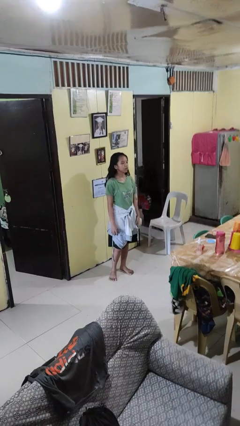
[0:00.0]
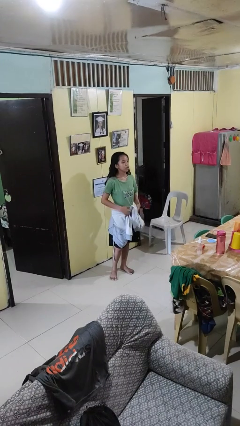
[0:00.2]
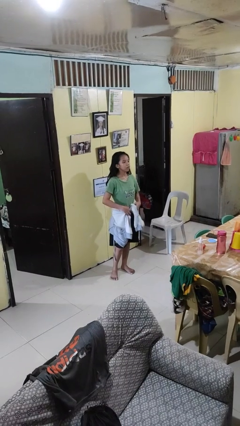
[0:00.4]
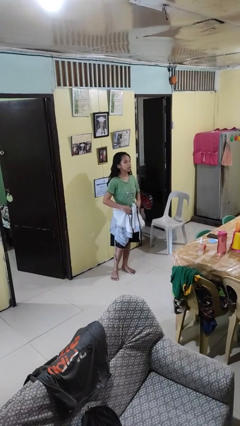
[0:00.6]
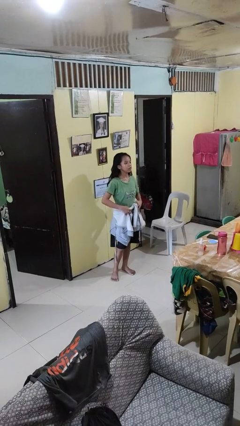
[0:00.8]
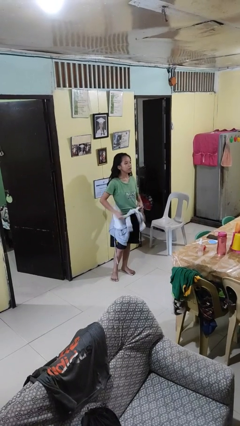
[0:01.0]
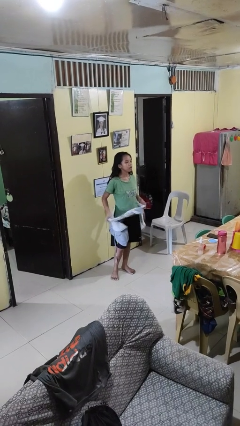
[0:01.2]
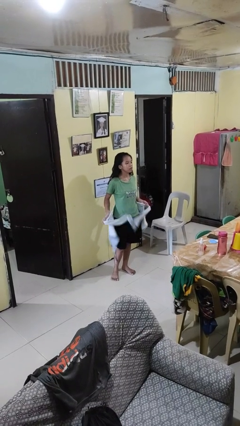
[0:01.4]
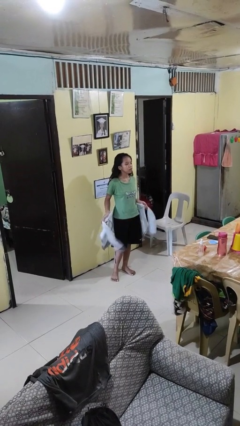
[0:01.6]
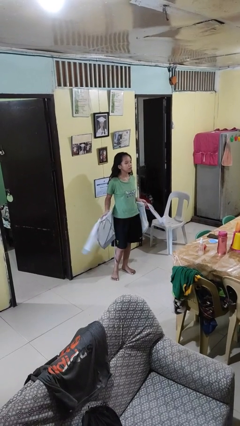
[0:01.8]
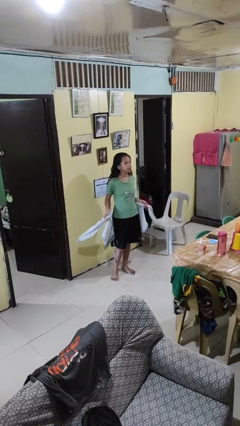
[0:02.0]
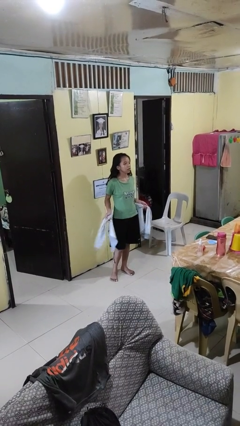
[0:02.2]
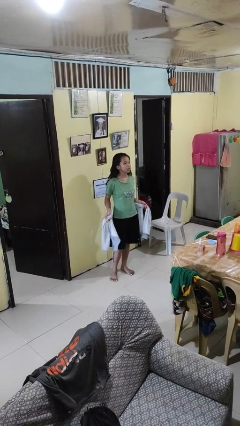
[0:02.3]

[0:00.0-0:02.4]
person unties jacket around waist

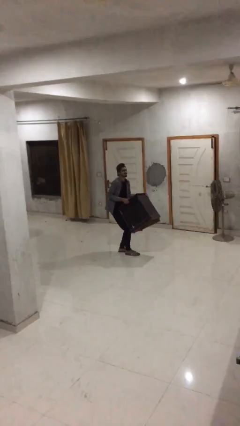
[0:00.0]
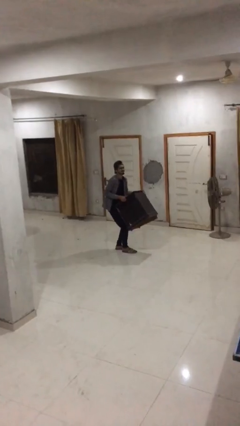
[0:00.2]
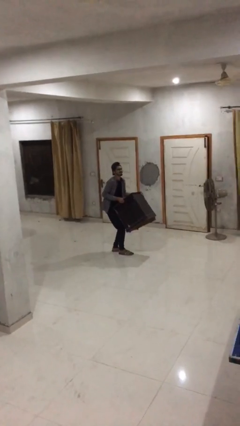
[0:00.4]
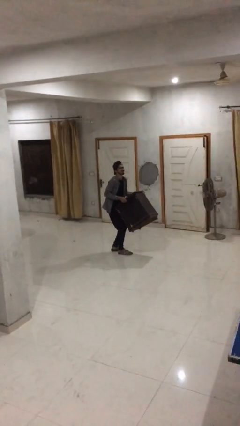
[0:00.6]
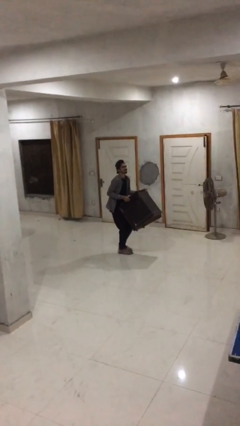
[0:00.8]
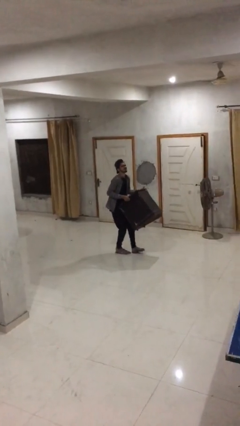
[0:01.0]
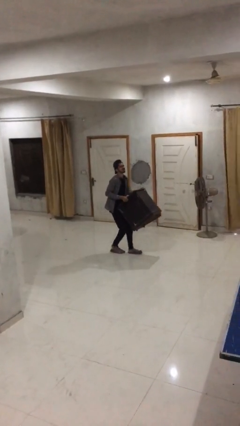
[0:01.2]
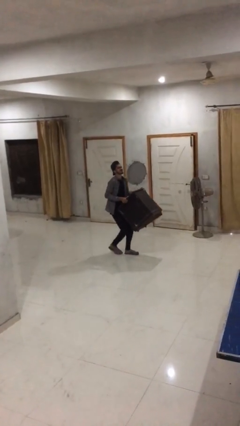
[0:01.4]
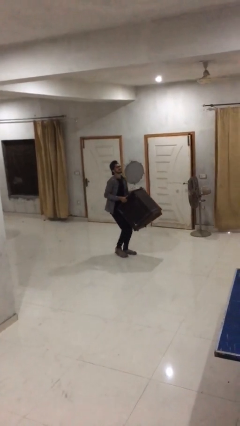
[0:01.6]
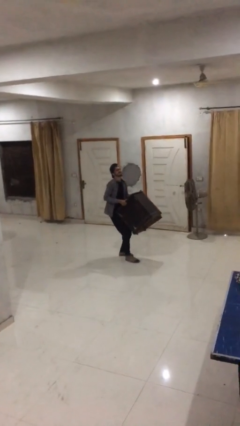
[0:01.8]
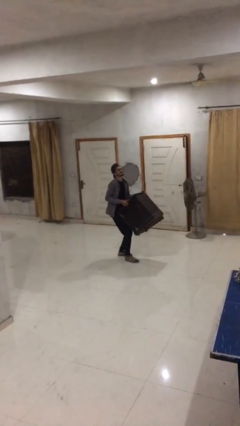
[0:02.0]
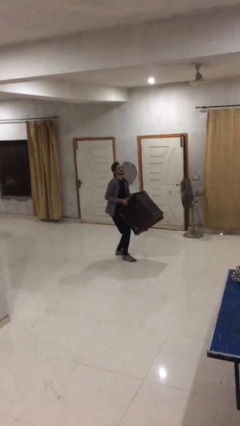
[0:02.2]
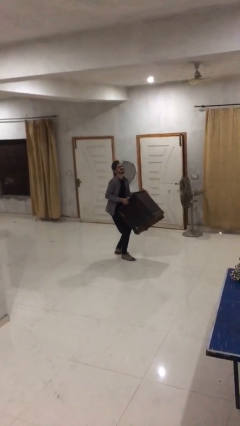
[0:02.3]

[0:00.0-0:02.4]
person carries heavy object

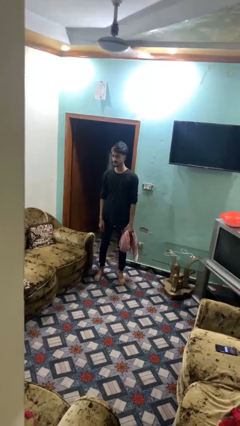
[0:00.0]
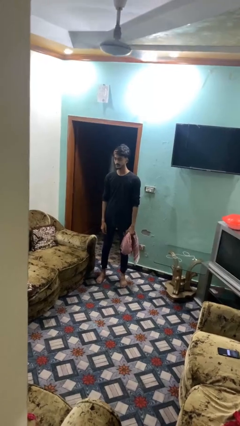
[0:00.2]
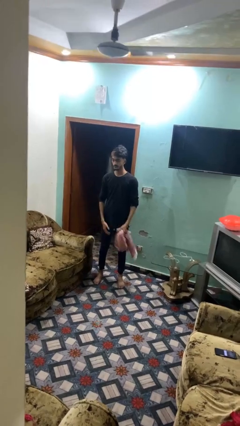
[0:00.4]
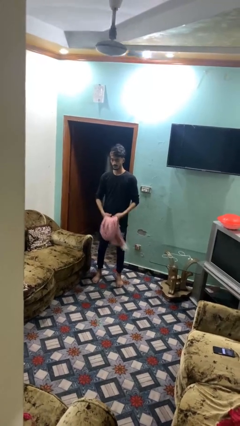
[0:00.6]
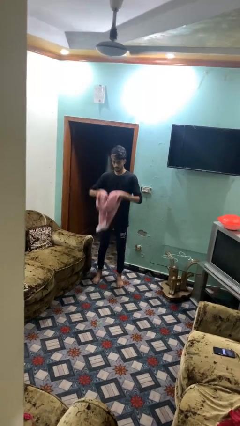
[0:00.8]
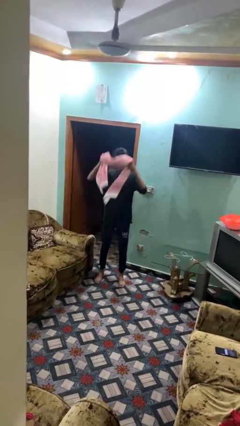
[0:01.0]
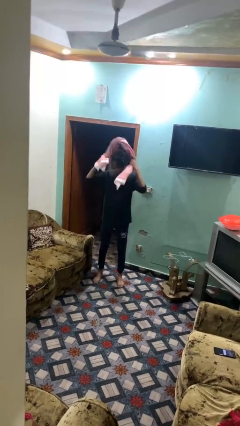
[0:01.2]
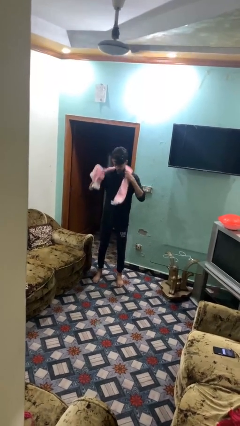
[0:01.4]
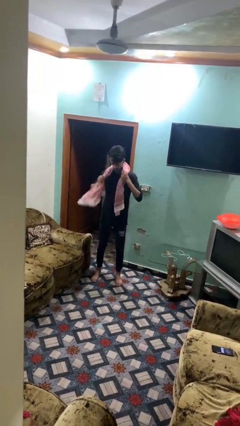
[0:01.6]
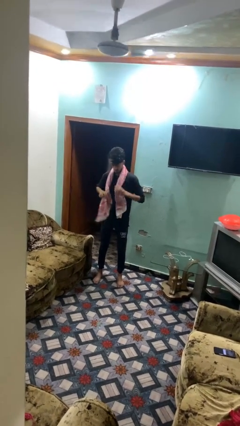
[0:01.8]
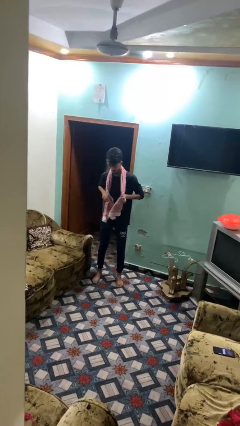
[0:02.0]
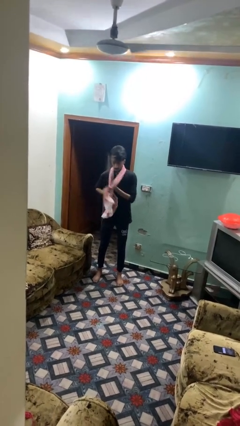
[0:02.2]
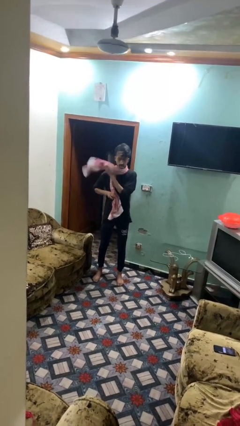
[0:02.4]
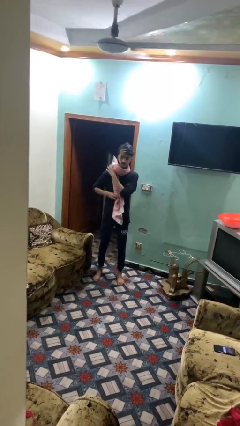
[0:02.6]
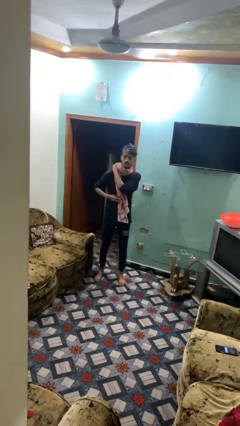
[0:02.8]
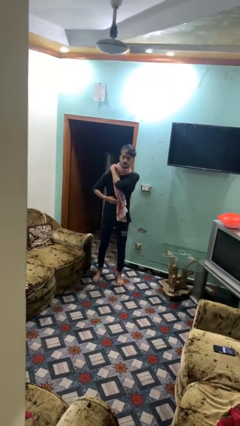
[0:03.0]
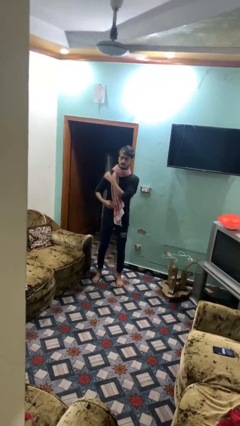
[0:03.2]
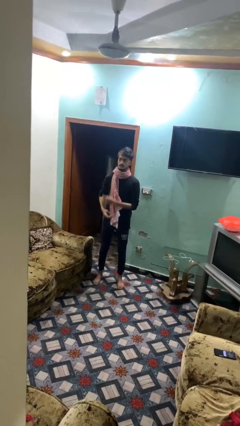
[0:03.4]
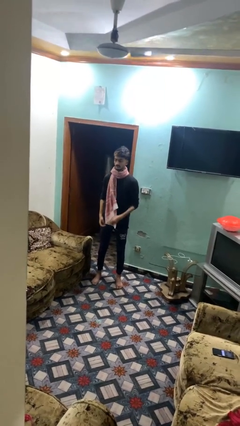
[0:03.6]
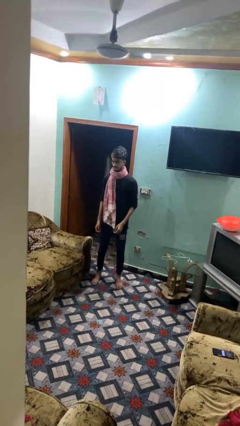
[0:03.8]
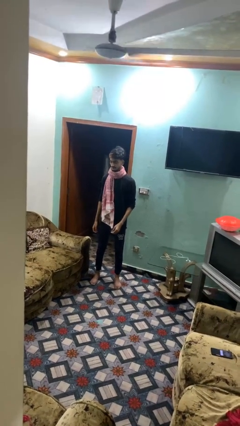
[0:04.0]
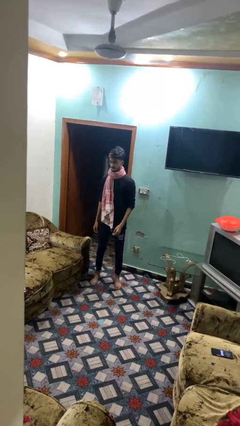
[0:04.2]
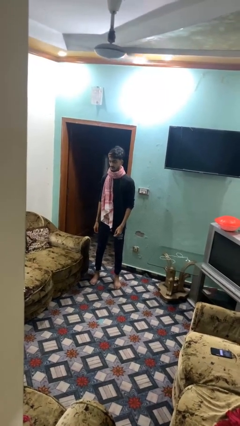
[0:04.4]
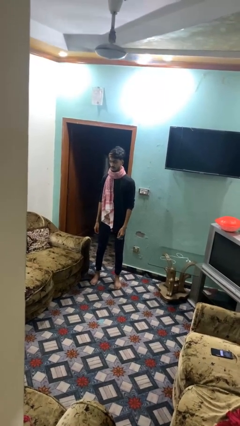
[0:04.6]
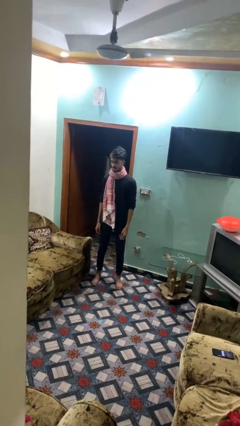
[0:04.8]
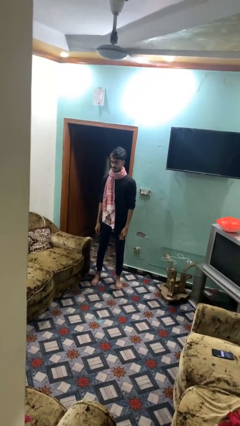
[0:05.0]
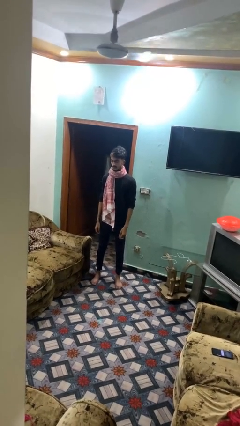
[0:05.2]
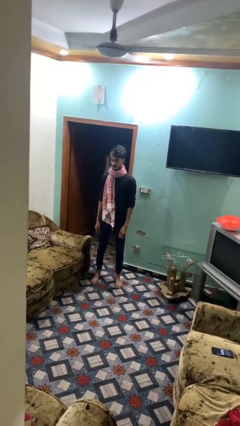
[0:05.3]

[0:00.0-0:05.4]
person puts on scarf

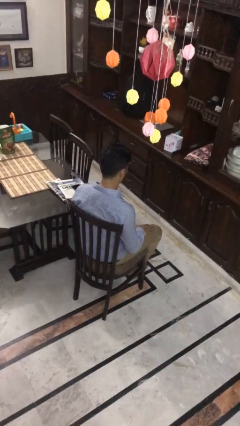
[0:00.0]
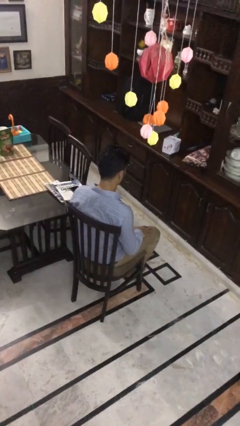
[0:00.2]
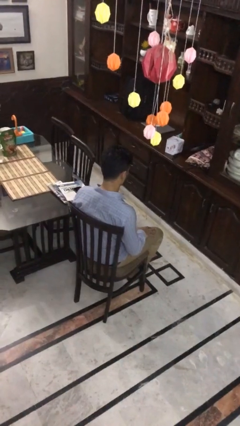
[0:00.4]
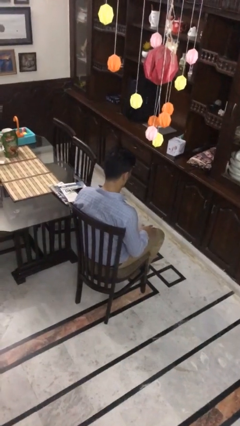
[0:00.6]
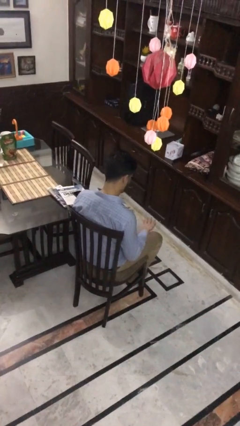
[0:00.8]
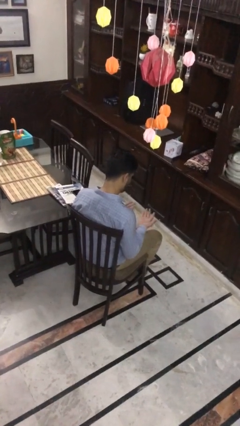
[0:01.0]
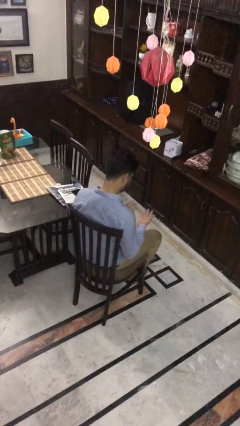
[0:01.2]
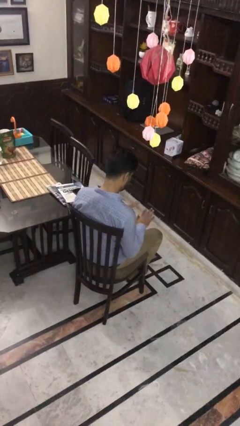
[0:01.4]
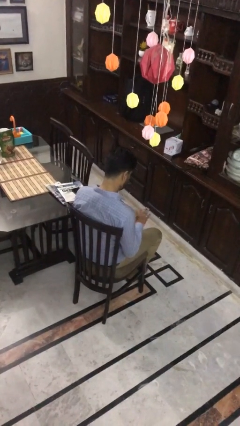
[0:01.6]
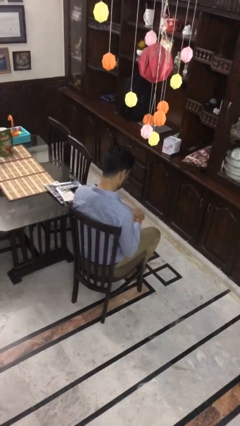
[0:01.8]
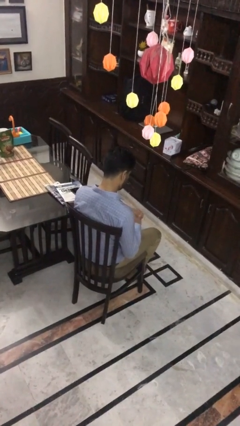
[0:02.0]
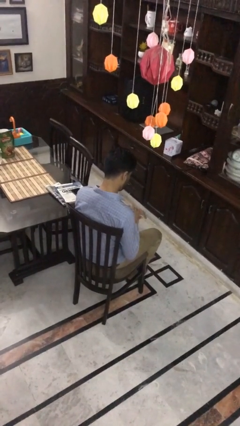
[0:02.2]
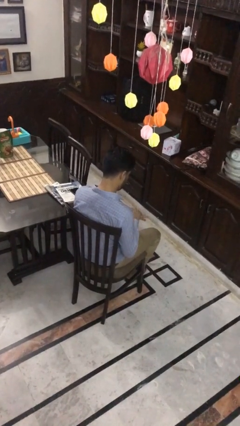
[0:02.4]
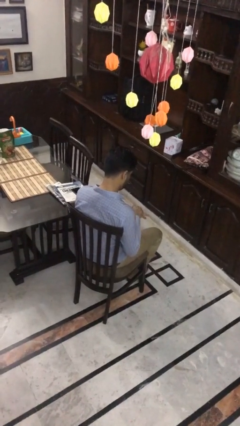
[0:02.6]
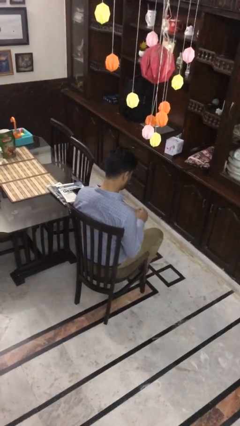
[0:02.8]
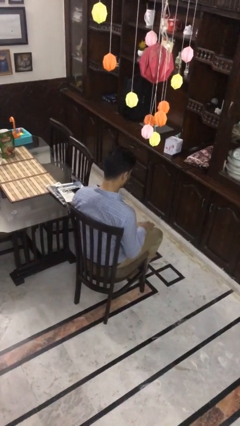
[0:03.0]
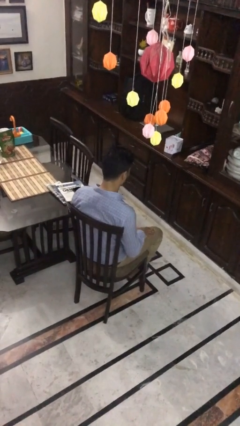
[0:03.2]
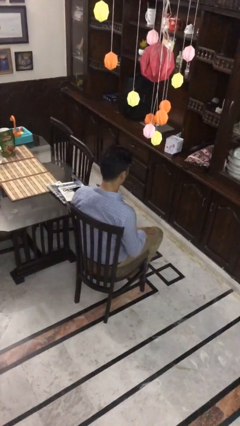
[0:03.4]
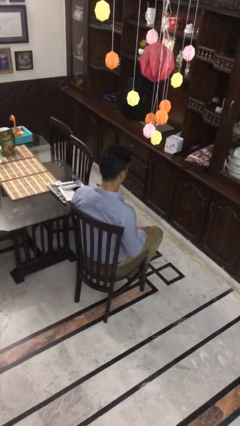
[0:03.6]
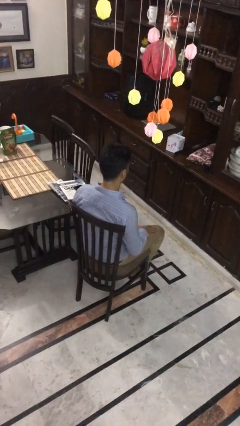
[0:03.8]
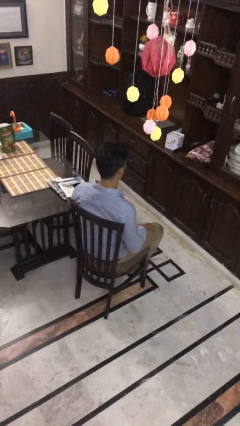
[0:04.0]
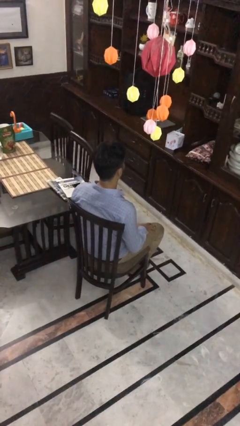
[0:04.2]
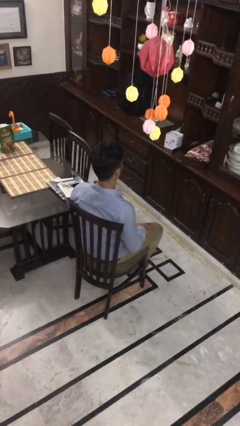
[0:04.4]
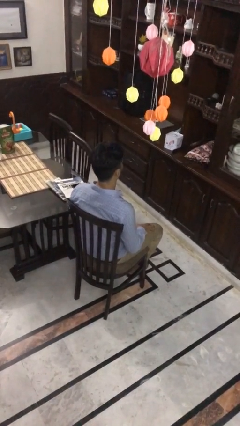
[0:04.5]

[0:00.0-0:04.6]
person looks at hands in lap

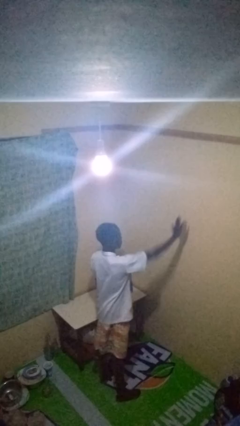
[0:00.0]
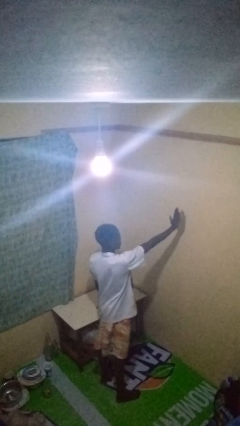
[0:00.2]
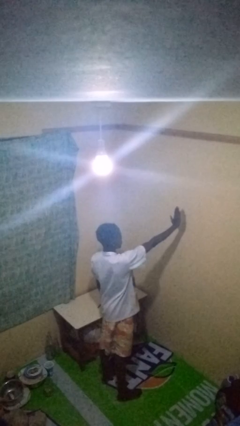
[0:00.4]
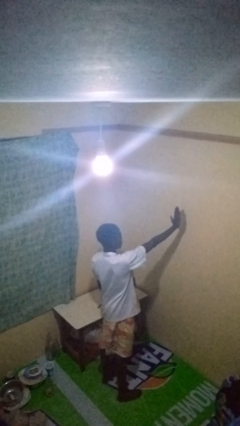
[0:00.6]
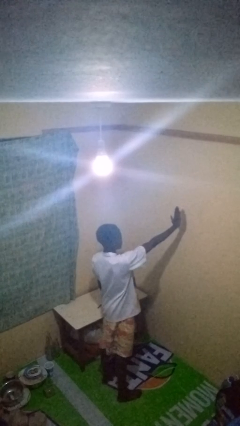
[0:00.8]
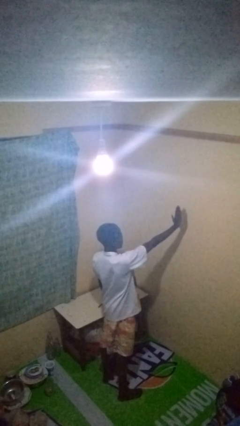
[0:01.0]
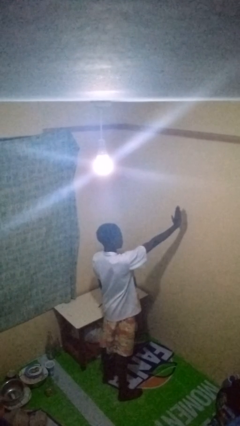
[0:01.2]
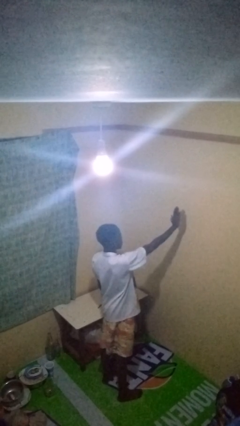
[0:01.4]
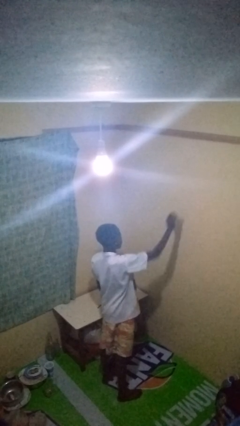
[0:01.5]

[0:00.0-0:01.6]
person gestures stop

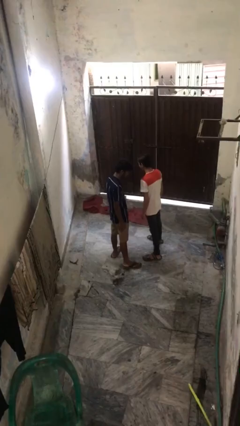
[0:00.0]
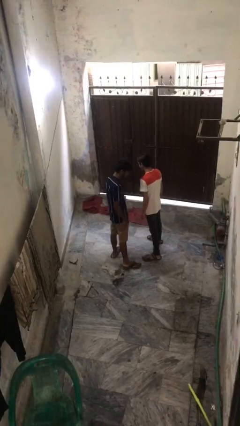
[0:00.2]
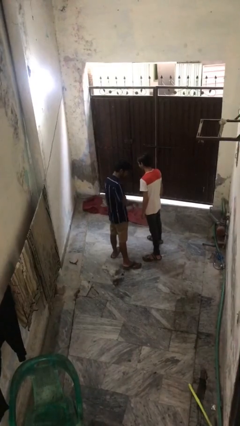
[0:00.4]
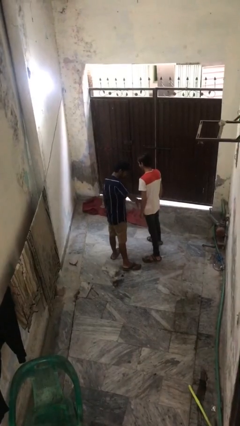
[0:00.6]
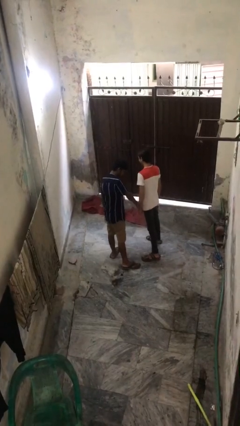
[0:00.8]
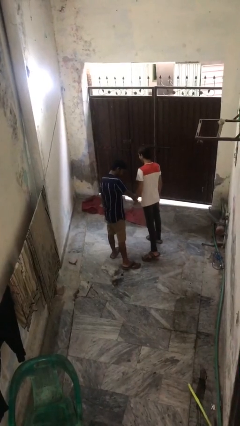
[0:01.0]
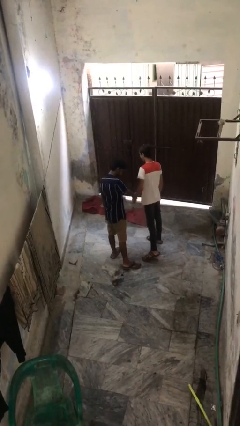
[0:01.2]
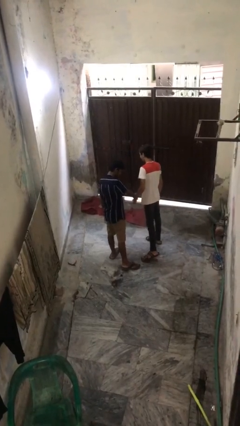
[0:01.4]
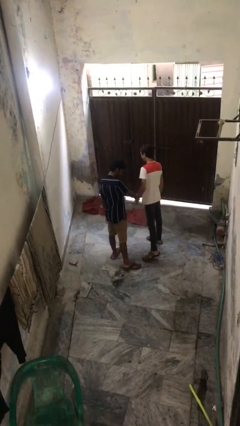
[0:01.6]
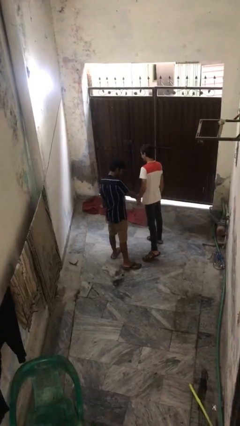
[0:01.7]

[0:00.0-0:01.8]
person grabs person by forearm
